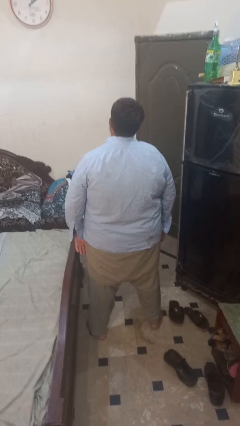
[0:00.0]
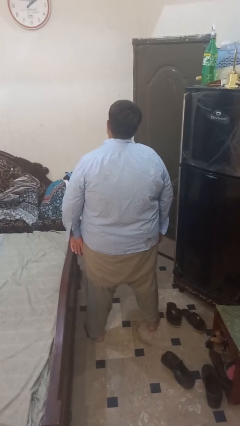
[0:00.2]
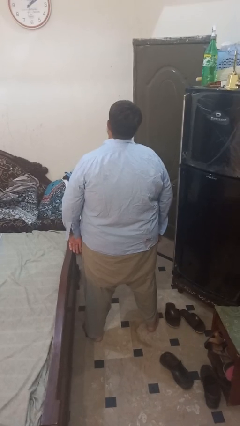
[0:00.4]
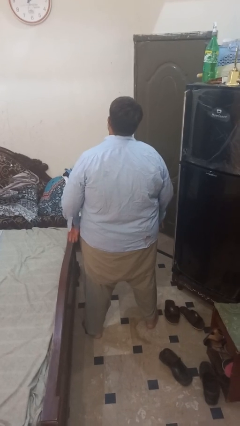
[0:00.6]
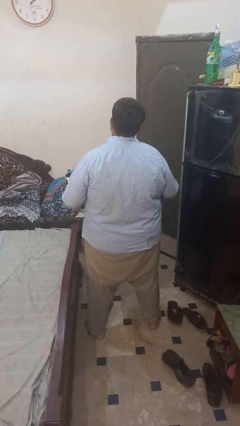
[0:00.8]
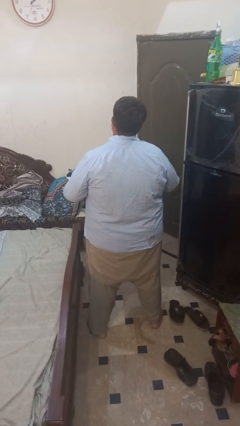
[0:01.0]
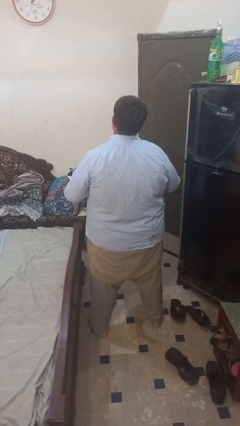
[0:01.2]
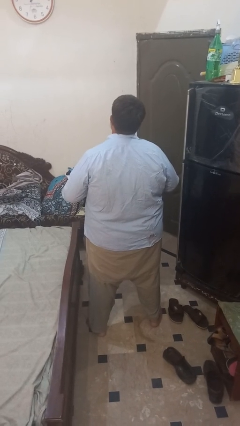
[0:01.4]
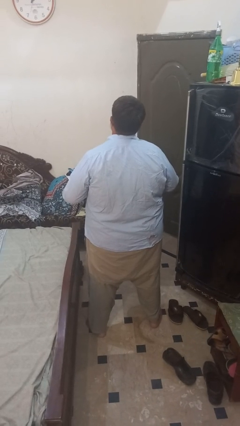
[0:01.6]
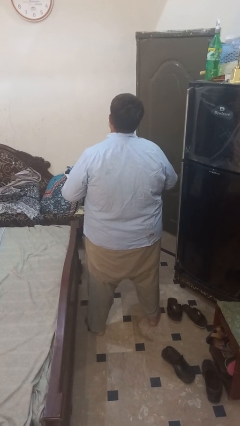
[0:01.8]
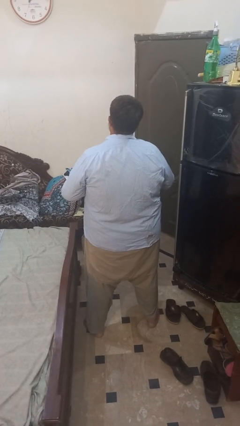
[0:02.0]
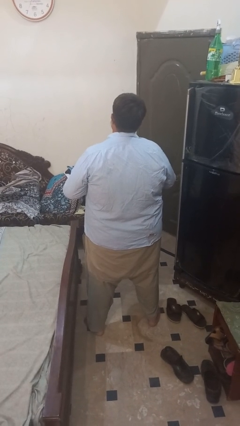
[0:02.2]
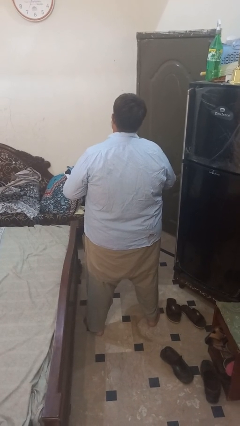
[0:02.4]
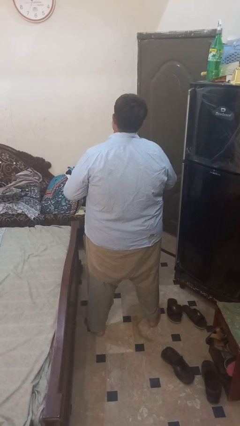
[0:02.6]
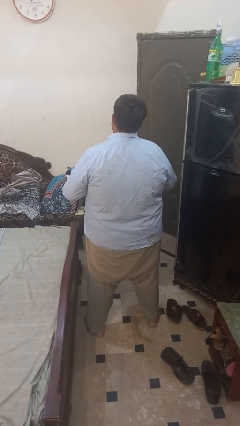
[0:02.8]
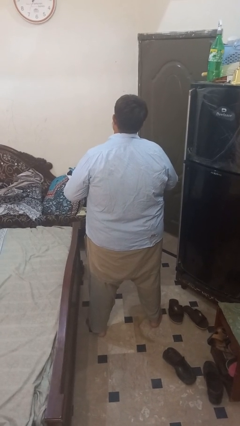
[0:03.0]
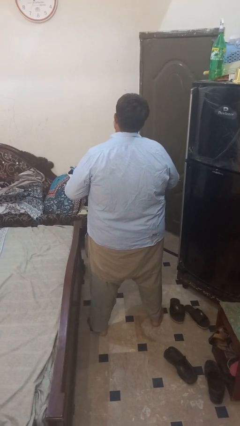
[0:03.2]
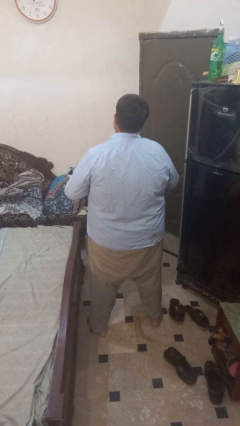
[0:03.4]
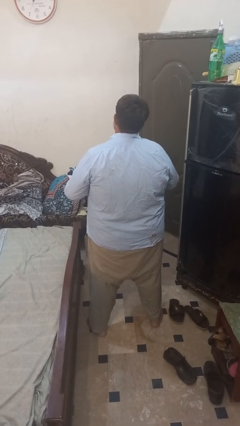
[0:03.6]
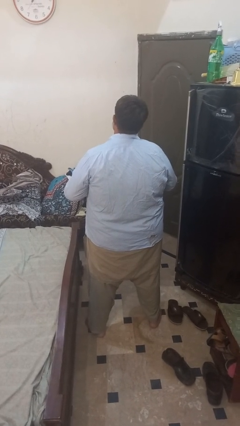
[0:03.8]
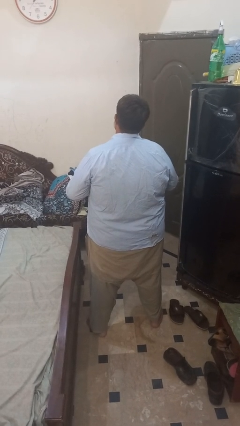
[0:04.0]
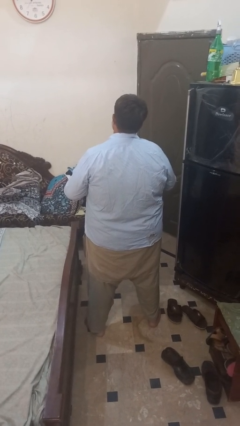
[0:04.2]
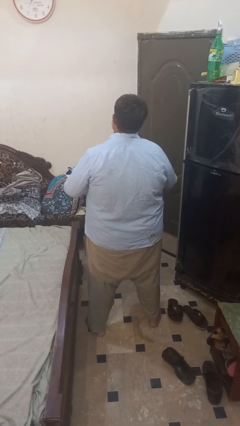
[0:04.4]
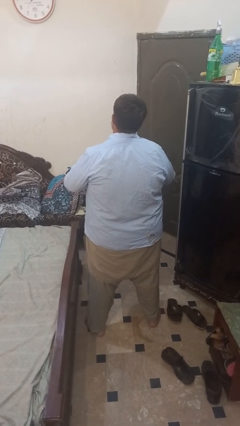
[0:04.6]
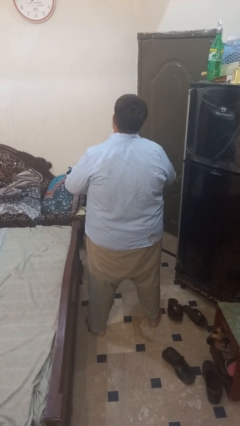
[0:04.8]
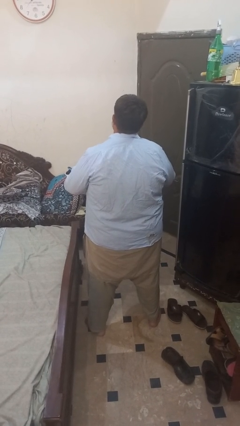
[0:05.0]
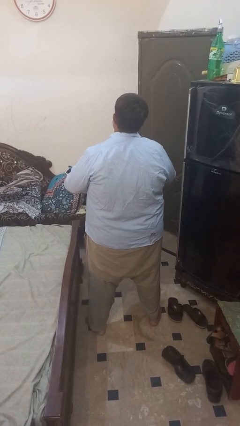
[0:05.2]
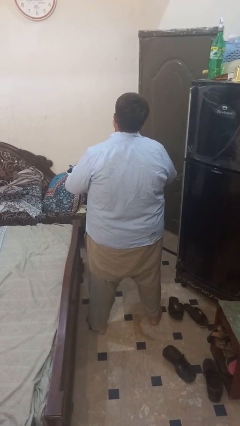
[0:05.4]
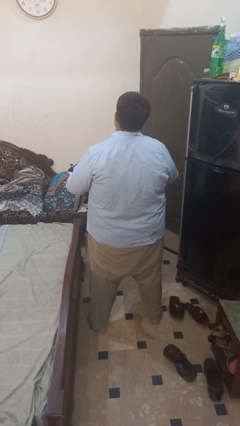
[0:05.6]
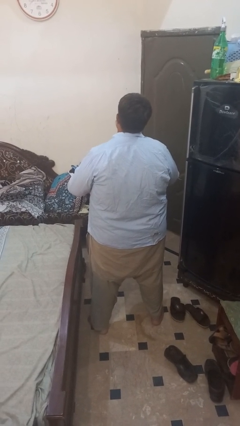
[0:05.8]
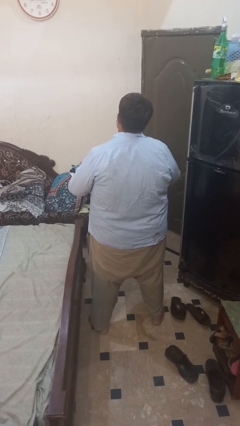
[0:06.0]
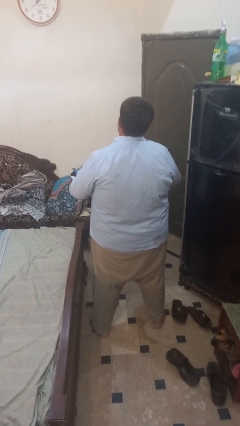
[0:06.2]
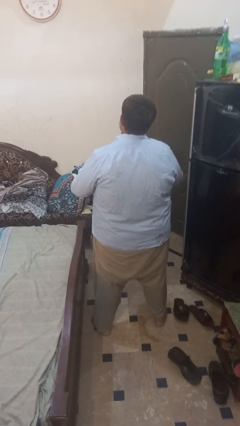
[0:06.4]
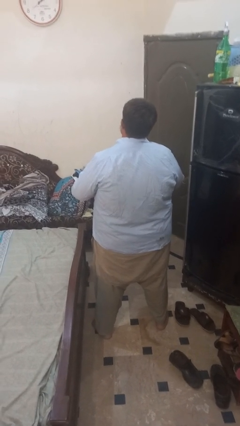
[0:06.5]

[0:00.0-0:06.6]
person buttons shirt

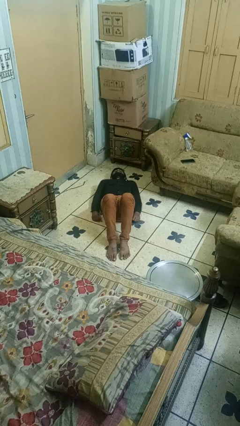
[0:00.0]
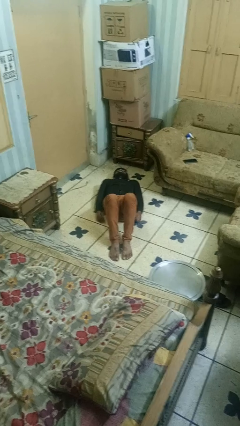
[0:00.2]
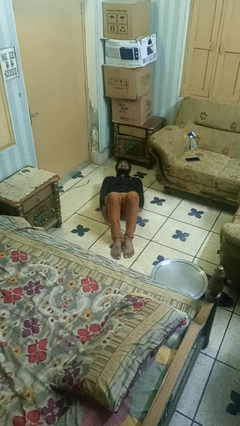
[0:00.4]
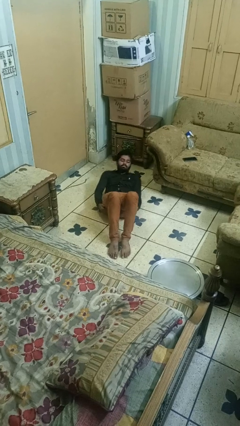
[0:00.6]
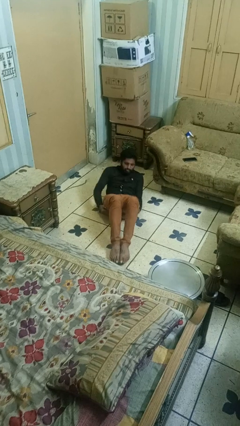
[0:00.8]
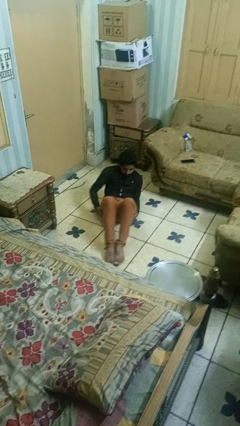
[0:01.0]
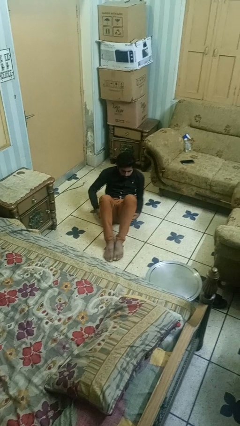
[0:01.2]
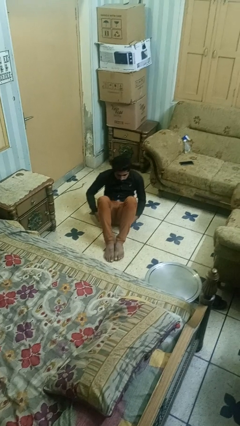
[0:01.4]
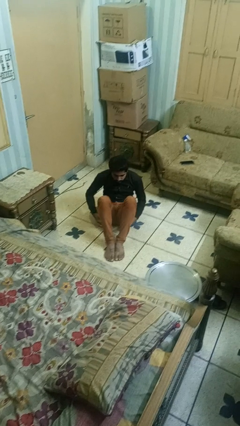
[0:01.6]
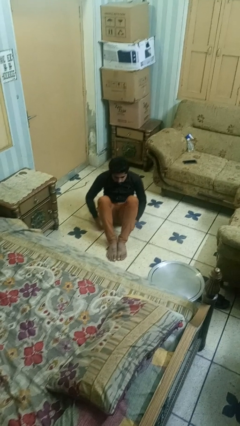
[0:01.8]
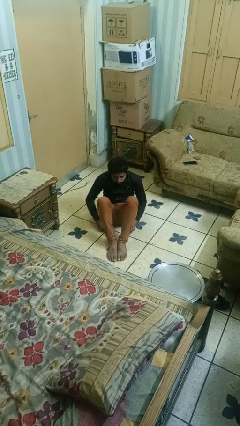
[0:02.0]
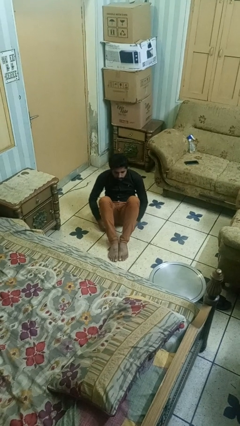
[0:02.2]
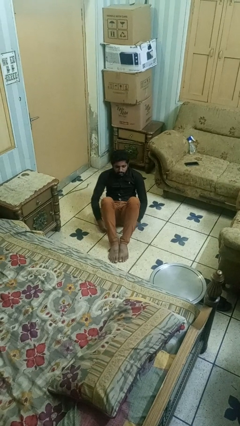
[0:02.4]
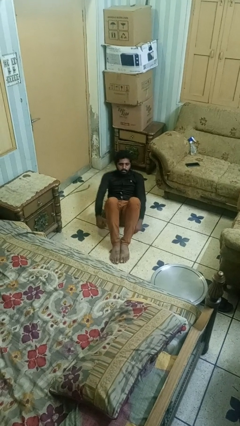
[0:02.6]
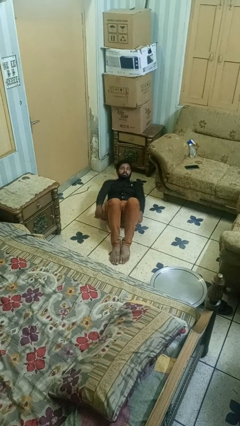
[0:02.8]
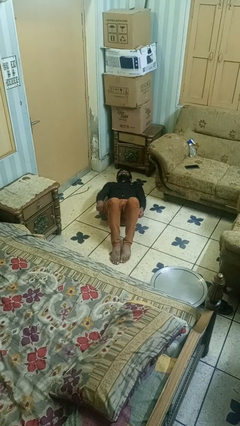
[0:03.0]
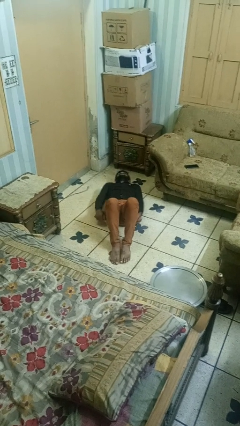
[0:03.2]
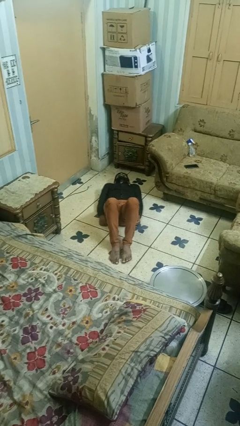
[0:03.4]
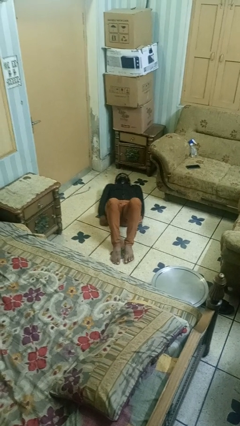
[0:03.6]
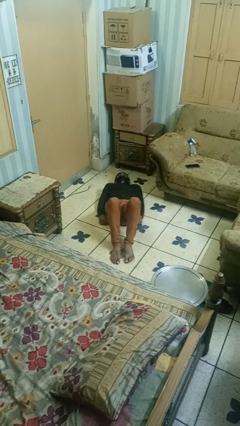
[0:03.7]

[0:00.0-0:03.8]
person exercises with situp

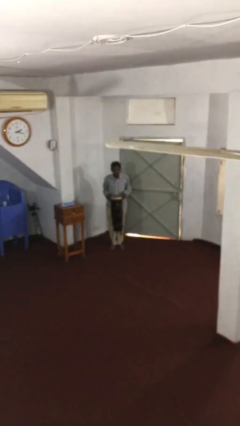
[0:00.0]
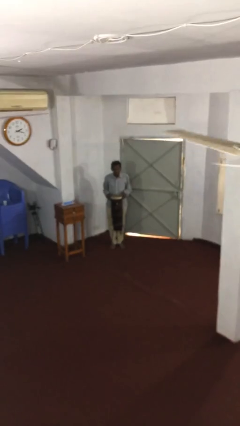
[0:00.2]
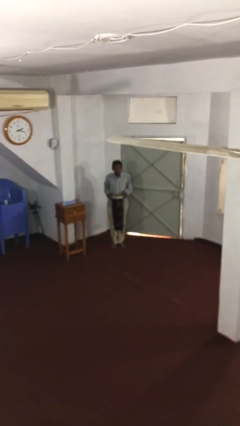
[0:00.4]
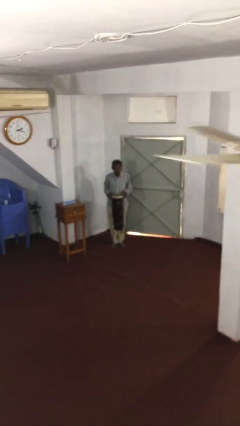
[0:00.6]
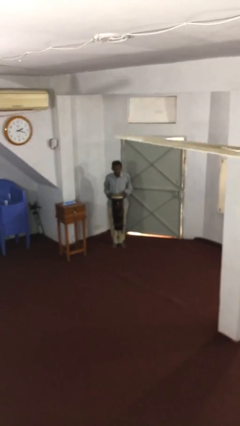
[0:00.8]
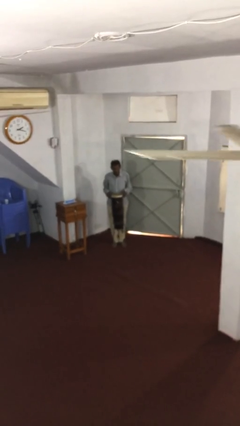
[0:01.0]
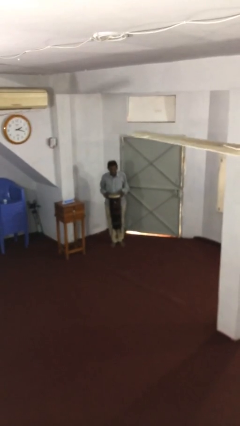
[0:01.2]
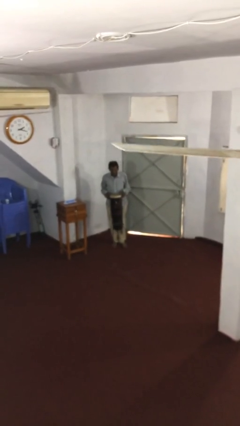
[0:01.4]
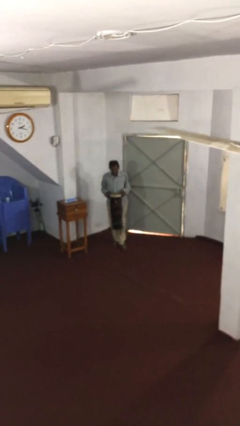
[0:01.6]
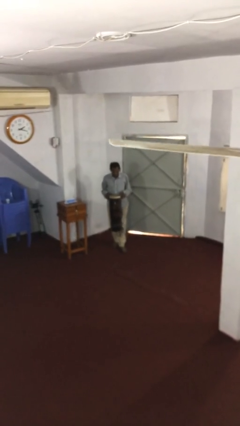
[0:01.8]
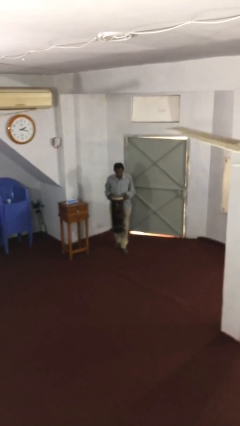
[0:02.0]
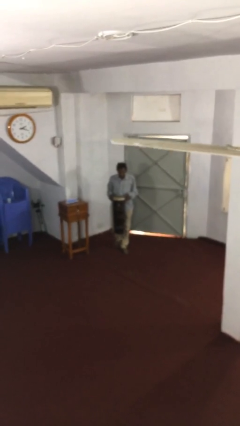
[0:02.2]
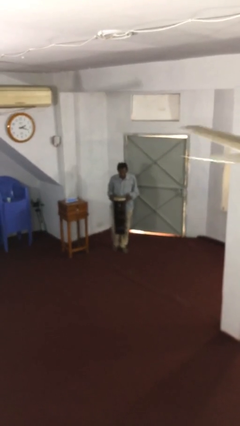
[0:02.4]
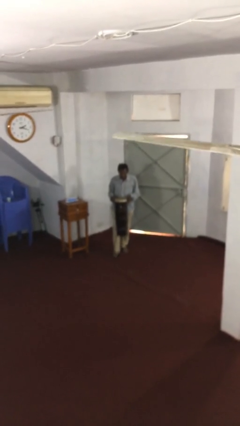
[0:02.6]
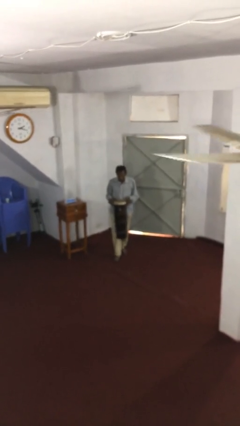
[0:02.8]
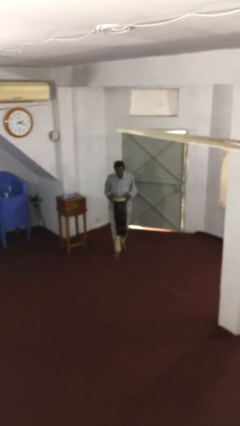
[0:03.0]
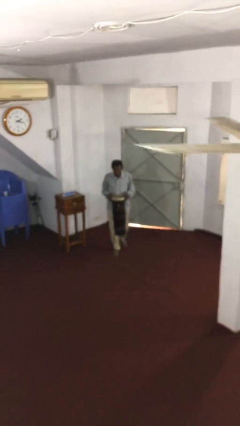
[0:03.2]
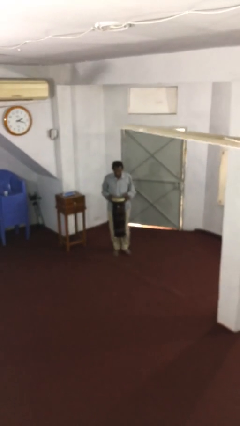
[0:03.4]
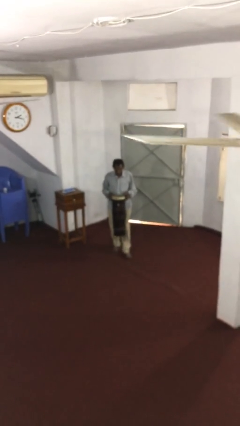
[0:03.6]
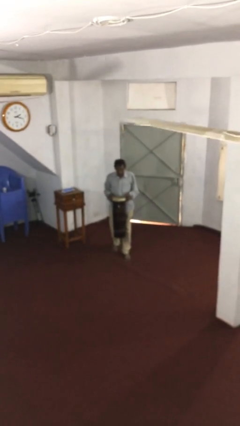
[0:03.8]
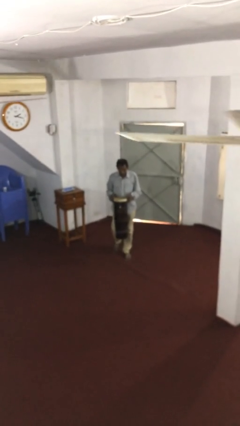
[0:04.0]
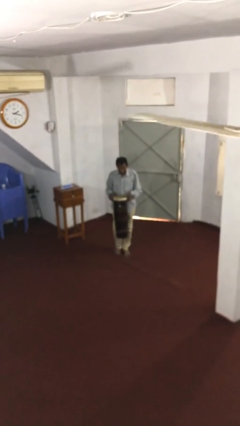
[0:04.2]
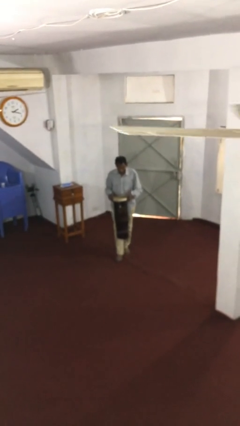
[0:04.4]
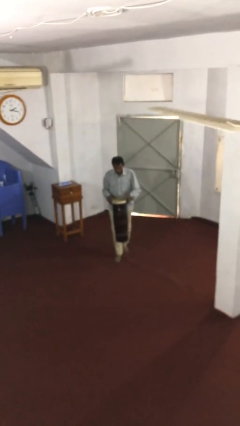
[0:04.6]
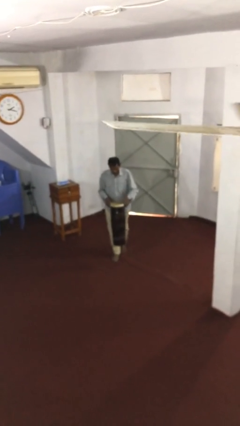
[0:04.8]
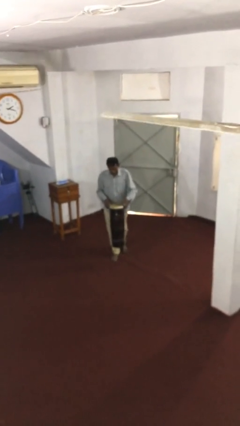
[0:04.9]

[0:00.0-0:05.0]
person carries heavy object

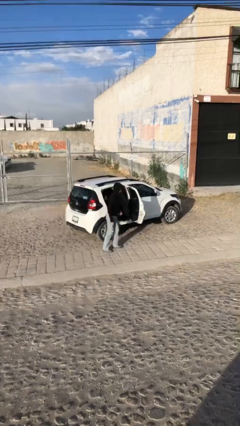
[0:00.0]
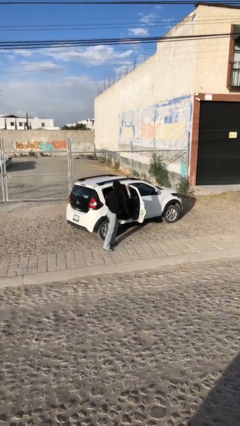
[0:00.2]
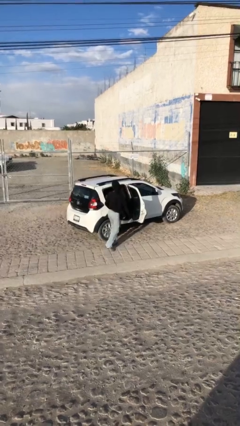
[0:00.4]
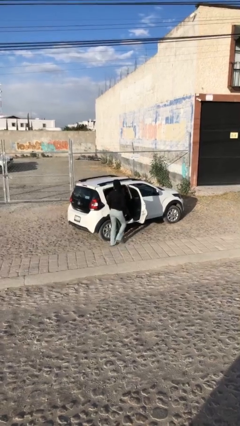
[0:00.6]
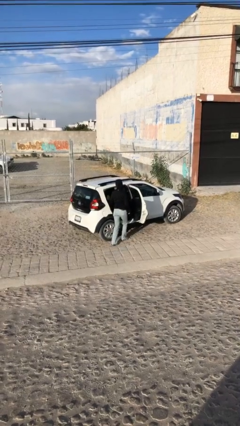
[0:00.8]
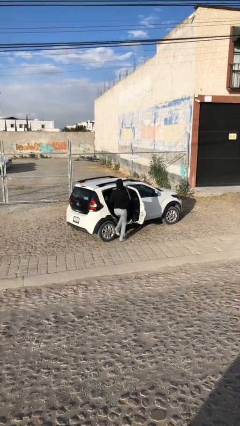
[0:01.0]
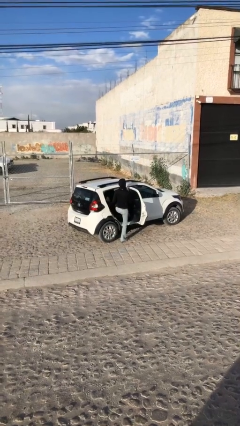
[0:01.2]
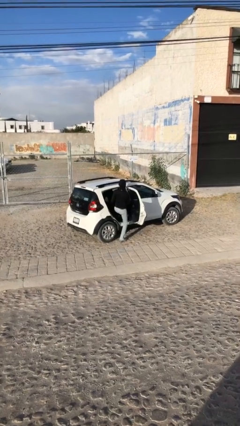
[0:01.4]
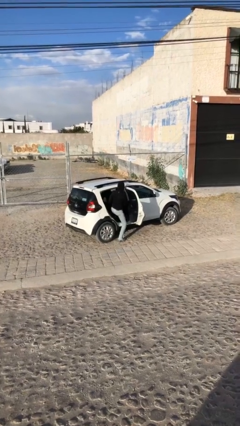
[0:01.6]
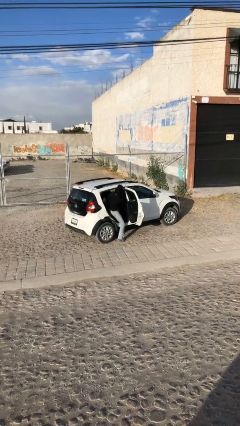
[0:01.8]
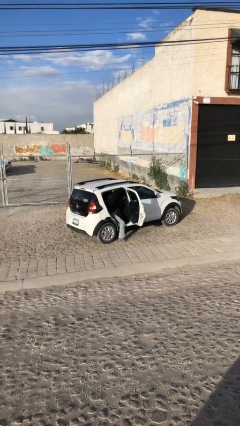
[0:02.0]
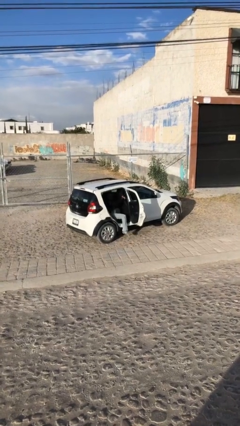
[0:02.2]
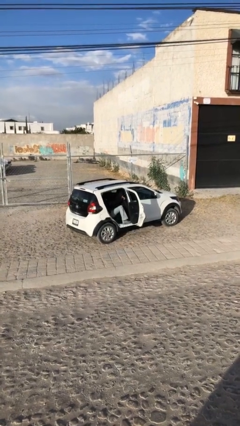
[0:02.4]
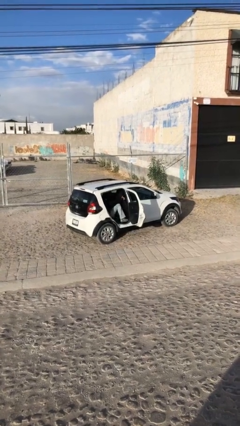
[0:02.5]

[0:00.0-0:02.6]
person enters car
